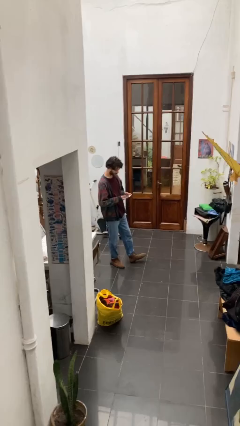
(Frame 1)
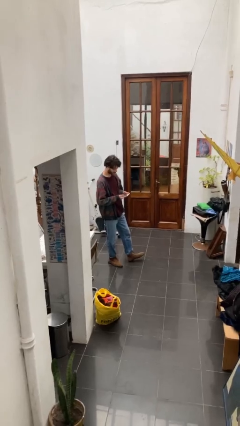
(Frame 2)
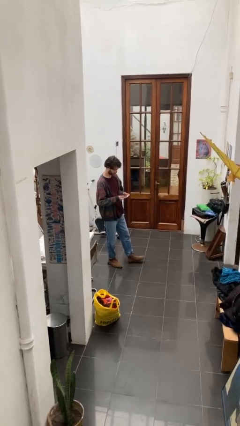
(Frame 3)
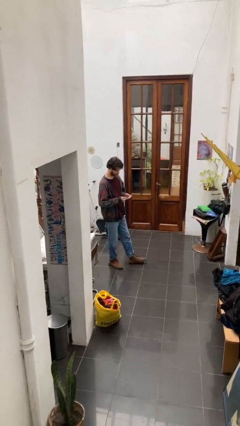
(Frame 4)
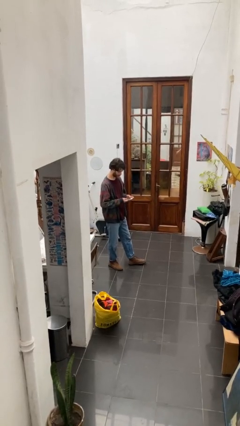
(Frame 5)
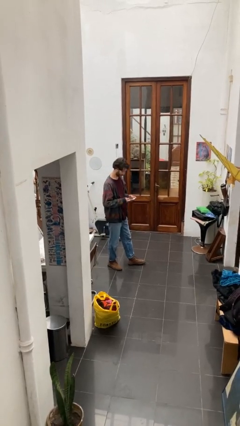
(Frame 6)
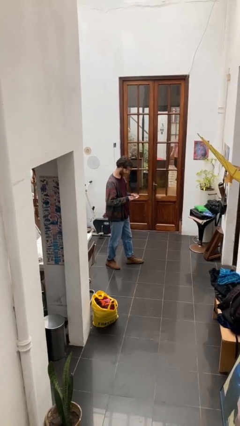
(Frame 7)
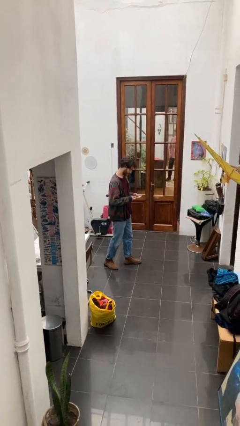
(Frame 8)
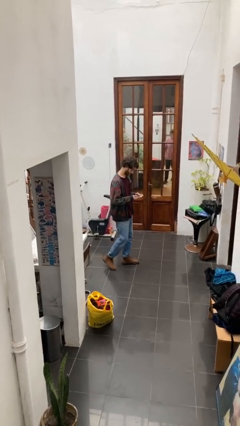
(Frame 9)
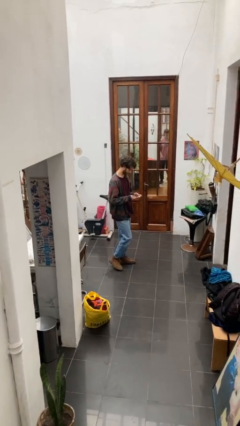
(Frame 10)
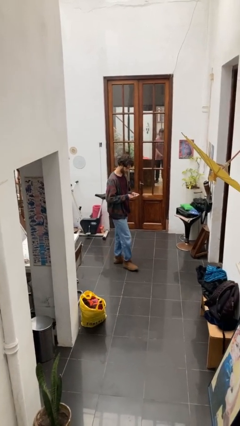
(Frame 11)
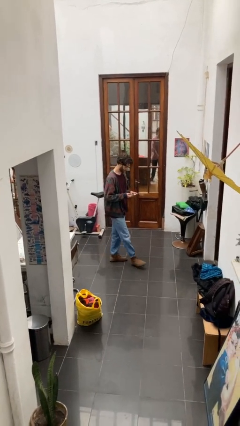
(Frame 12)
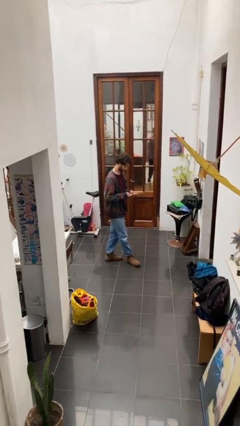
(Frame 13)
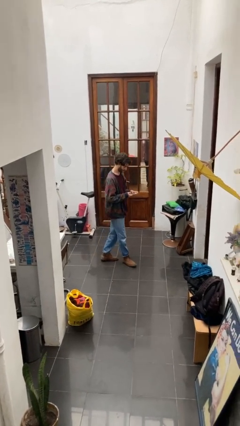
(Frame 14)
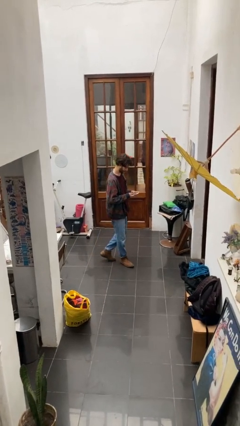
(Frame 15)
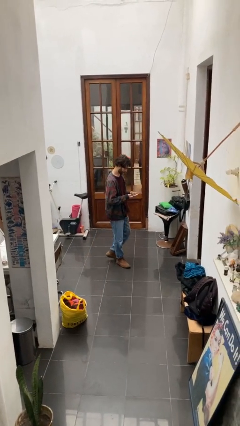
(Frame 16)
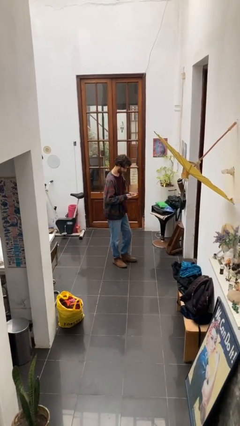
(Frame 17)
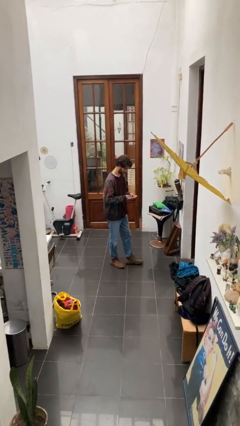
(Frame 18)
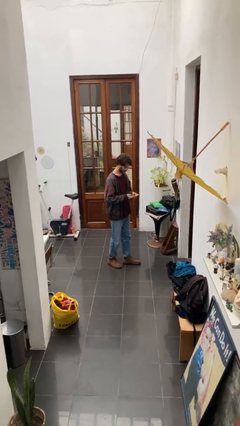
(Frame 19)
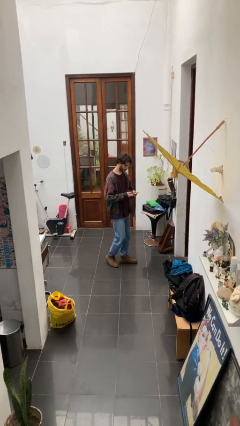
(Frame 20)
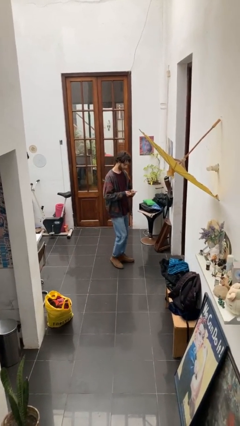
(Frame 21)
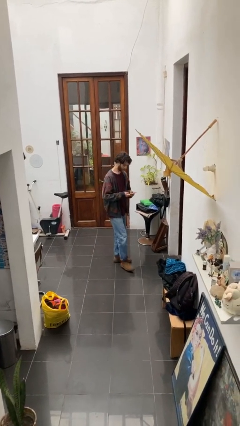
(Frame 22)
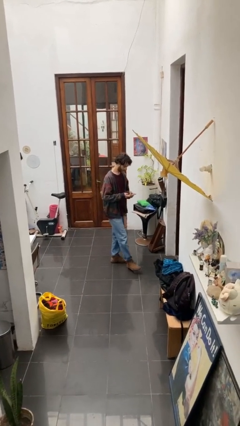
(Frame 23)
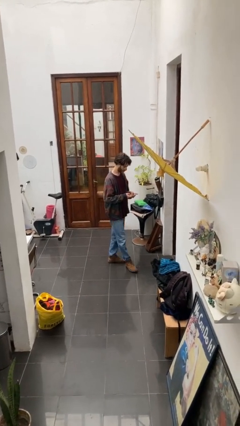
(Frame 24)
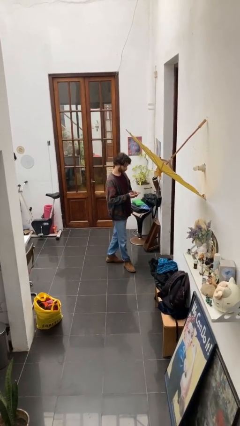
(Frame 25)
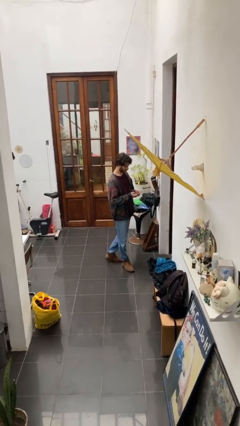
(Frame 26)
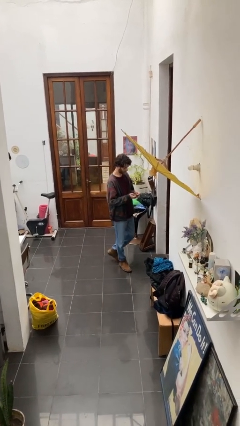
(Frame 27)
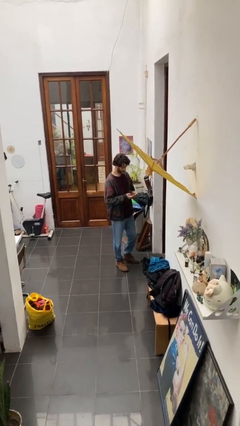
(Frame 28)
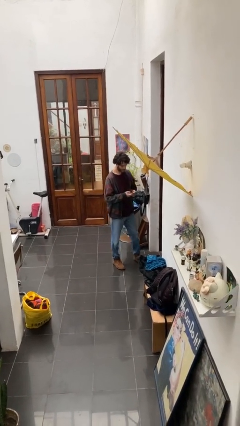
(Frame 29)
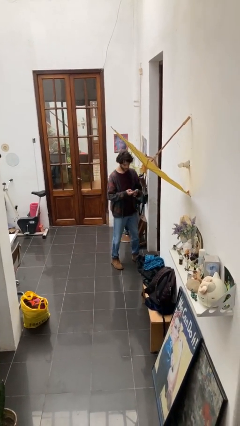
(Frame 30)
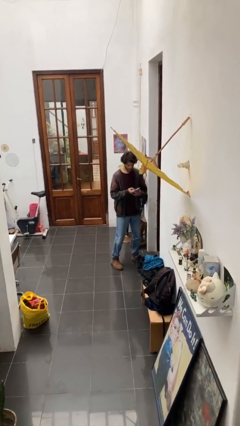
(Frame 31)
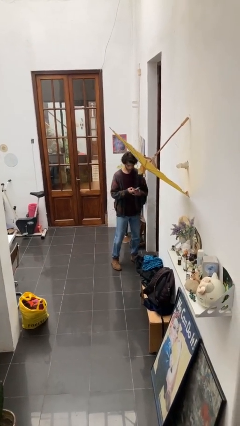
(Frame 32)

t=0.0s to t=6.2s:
person texts on phone

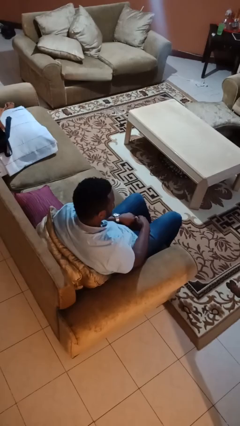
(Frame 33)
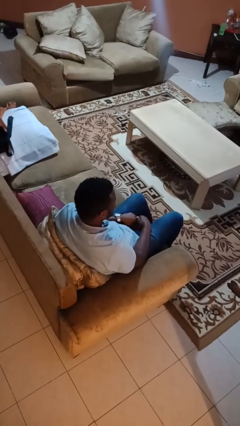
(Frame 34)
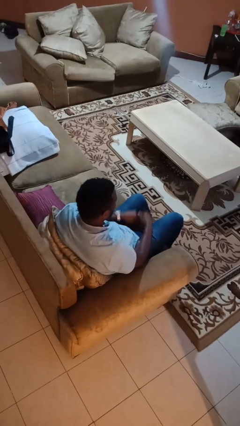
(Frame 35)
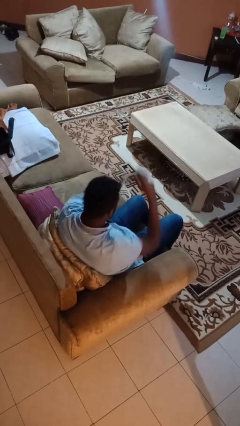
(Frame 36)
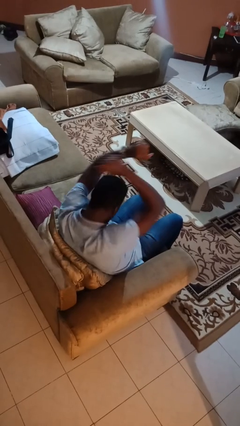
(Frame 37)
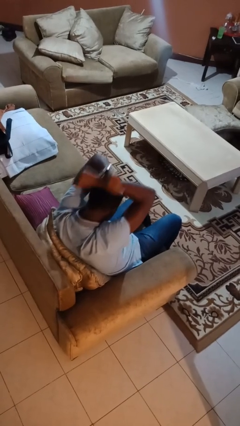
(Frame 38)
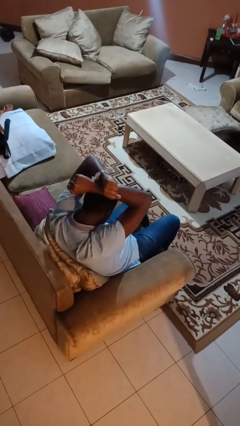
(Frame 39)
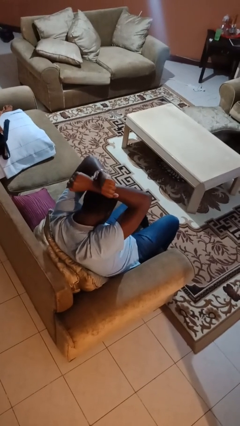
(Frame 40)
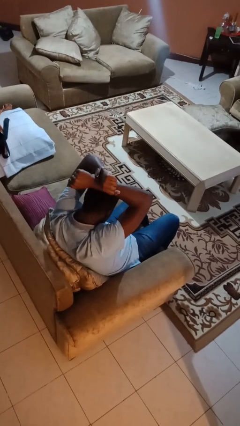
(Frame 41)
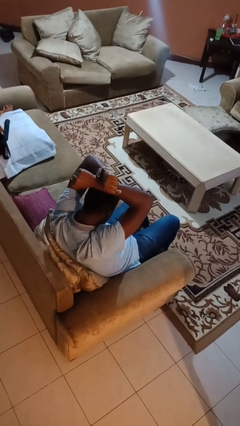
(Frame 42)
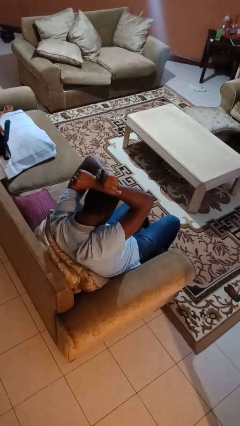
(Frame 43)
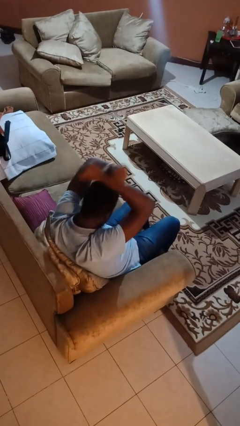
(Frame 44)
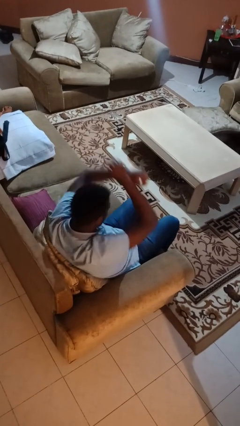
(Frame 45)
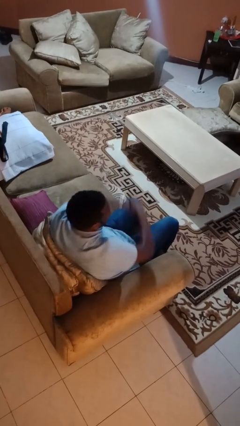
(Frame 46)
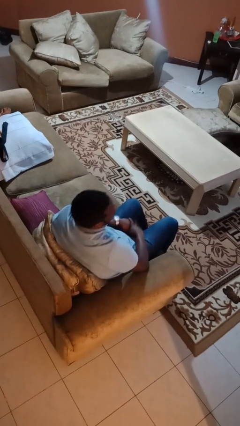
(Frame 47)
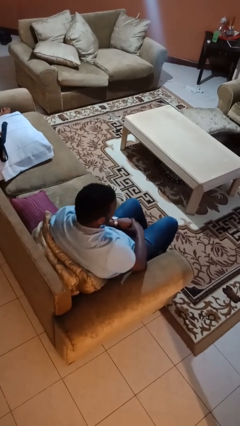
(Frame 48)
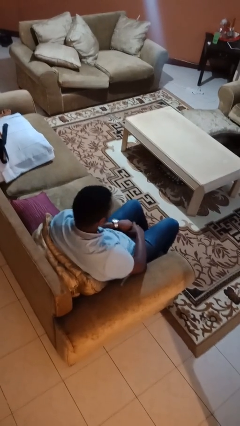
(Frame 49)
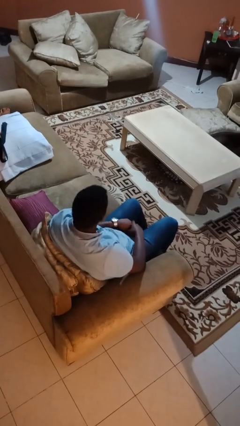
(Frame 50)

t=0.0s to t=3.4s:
person gestures arms x

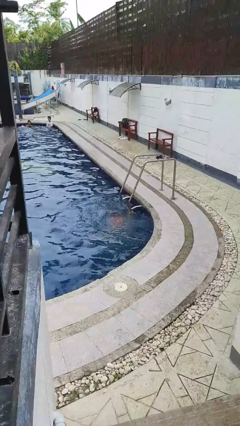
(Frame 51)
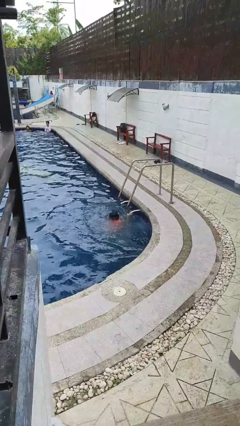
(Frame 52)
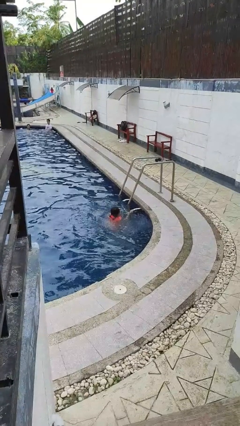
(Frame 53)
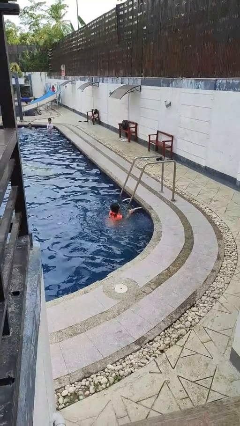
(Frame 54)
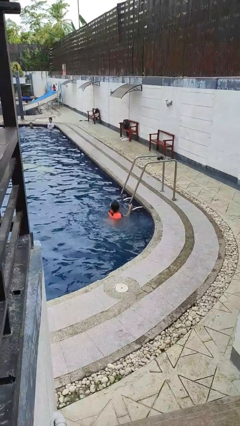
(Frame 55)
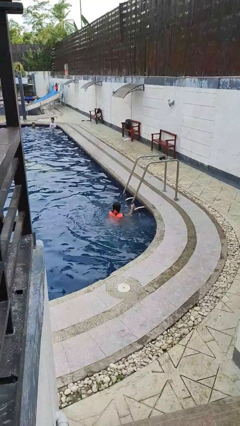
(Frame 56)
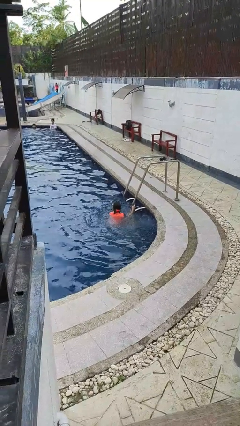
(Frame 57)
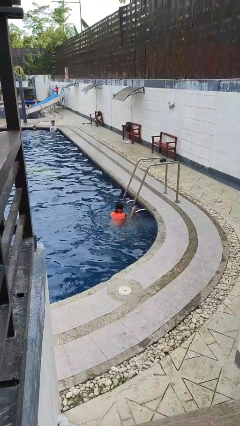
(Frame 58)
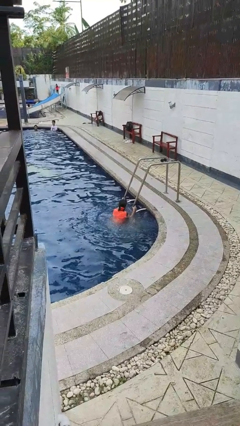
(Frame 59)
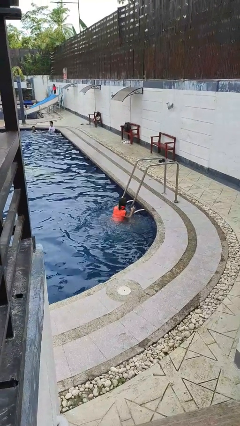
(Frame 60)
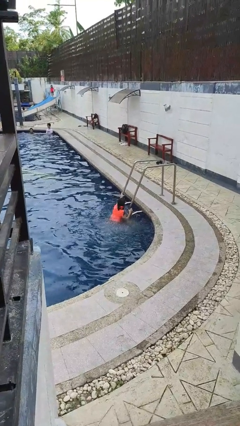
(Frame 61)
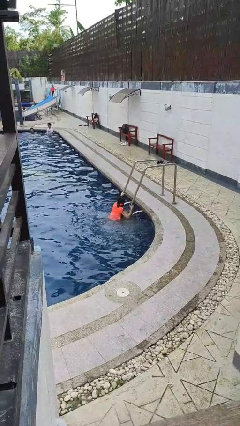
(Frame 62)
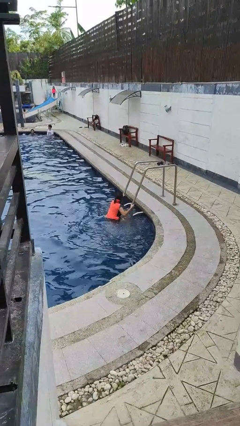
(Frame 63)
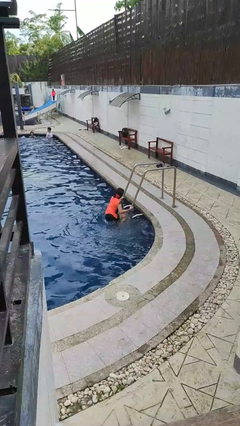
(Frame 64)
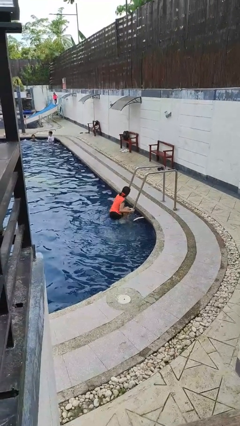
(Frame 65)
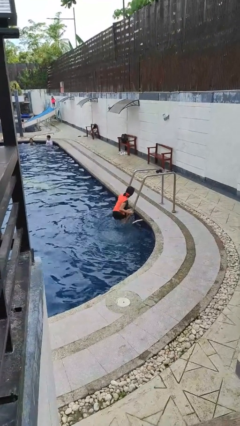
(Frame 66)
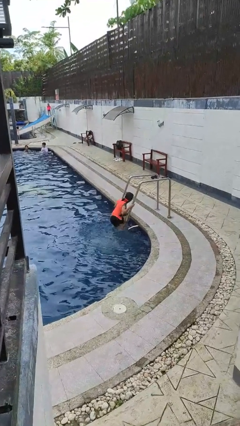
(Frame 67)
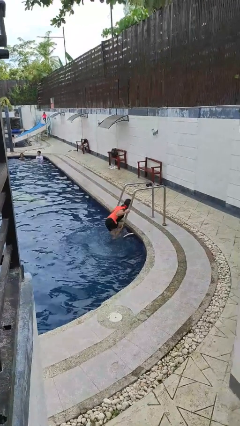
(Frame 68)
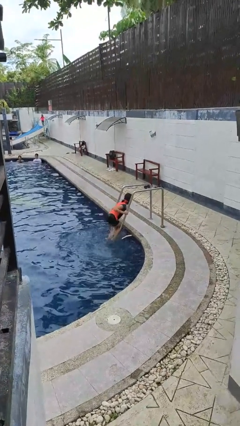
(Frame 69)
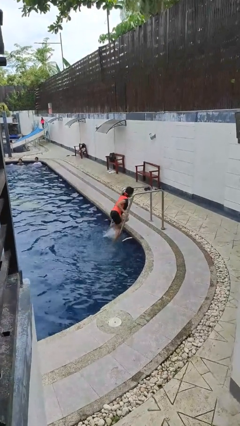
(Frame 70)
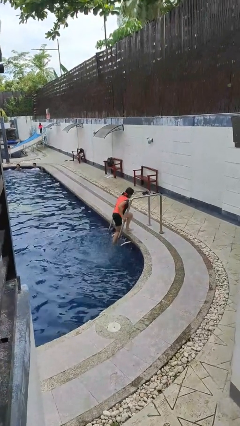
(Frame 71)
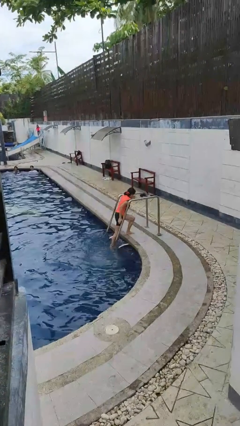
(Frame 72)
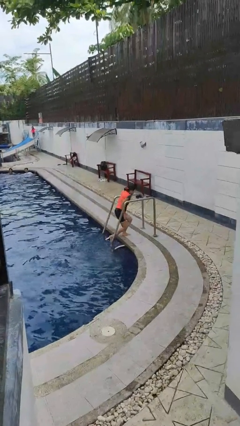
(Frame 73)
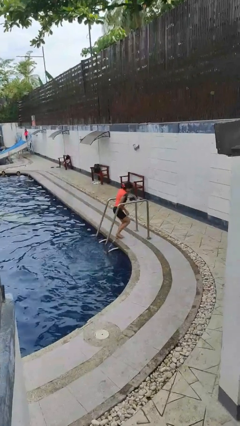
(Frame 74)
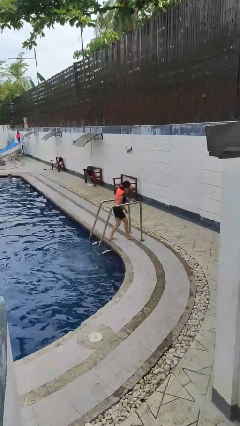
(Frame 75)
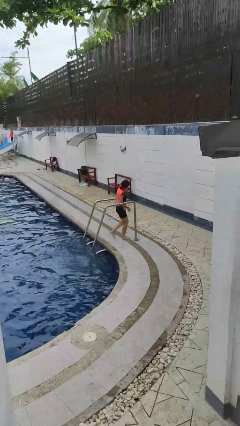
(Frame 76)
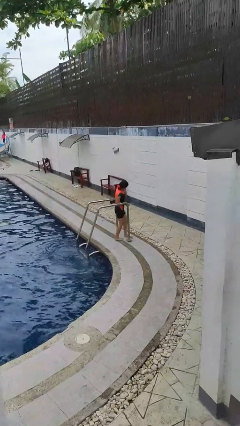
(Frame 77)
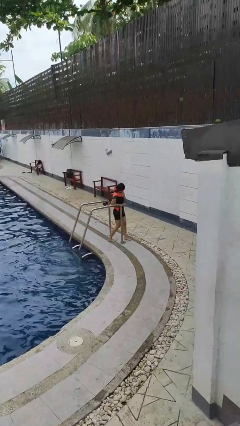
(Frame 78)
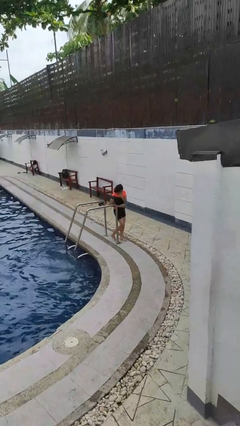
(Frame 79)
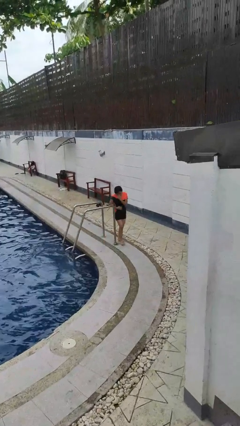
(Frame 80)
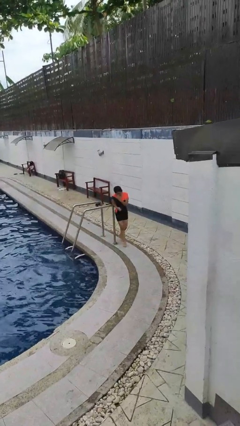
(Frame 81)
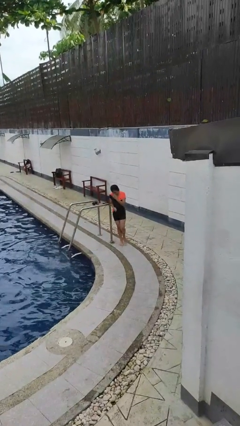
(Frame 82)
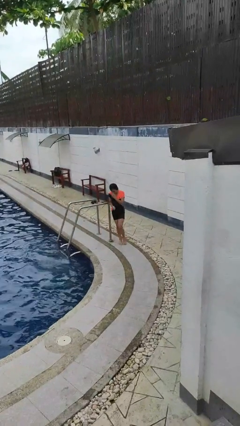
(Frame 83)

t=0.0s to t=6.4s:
person exits pool

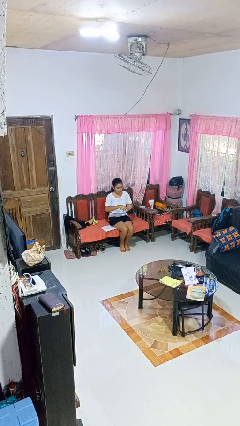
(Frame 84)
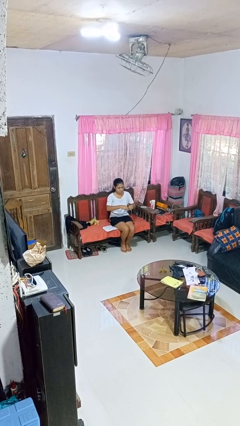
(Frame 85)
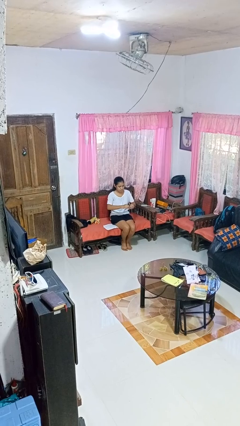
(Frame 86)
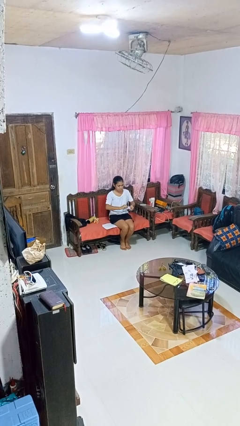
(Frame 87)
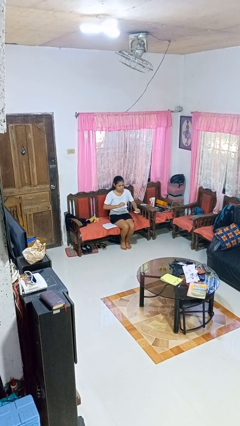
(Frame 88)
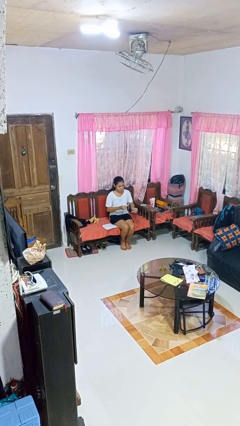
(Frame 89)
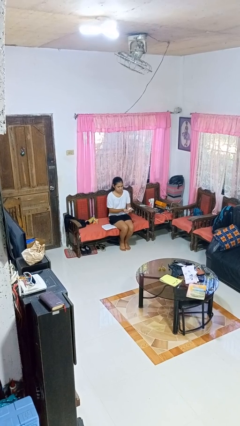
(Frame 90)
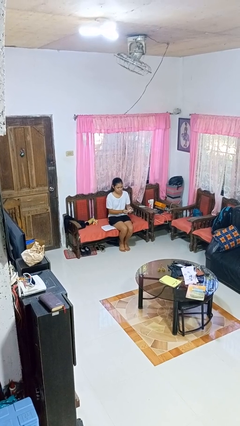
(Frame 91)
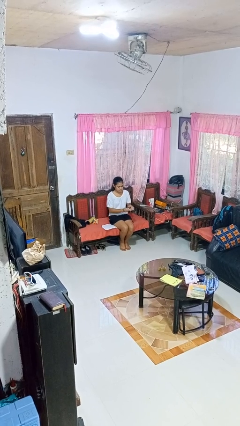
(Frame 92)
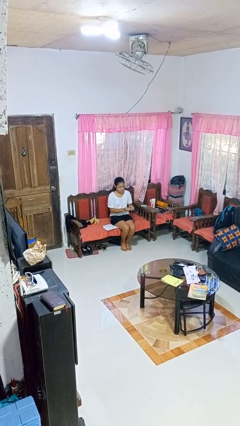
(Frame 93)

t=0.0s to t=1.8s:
person tears paper
